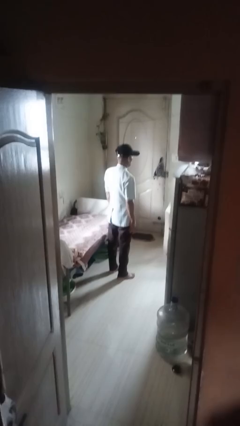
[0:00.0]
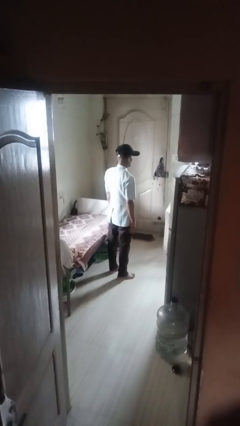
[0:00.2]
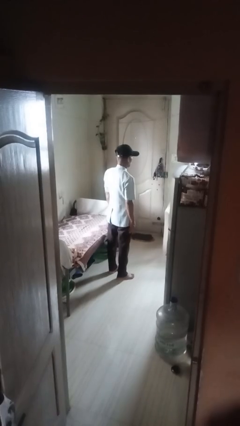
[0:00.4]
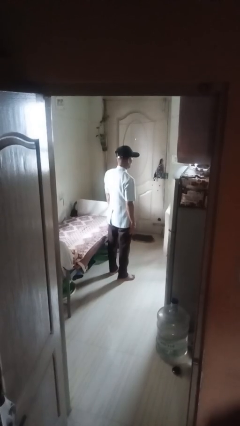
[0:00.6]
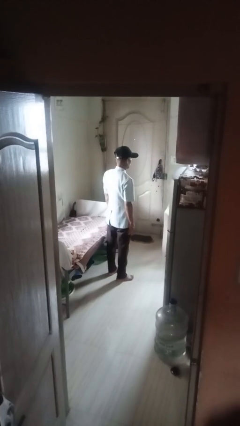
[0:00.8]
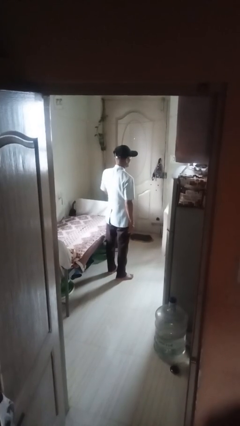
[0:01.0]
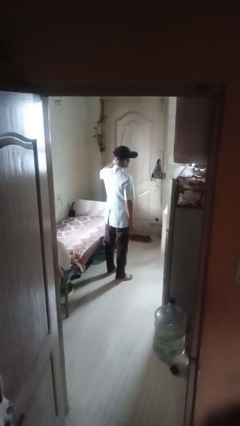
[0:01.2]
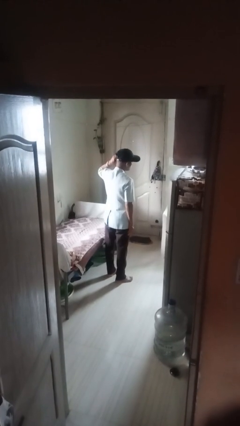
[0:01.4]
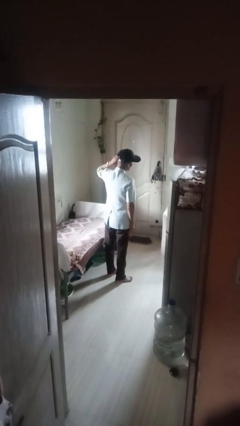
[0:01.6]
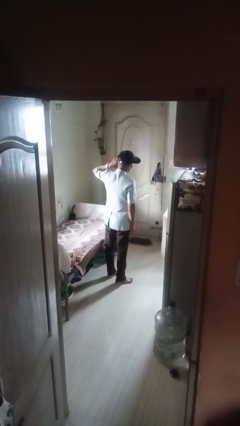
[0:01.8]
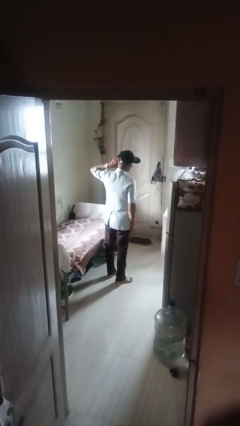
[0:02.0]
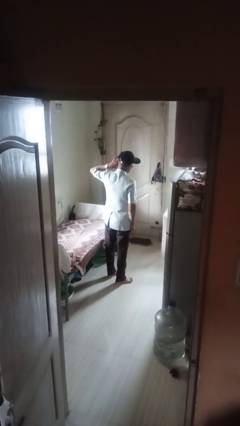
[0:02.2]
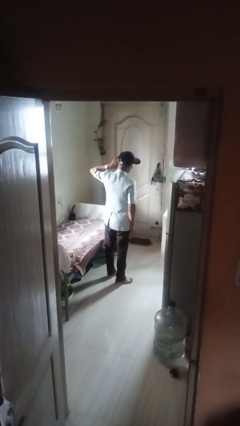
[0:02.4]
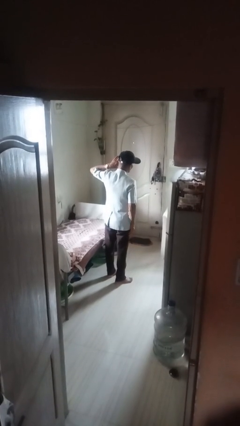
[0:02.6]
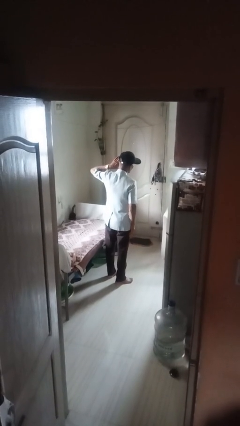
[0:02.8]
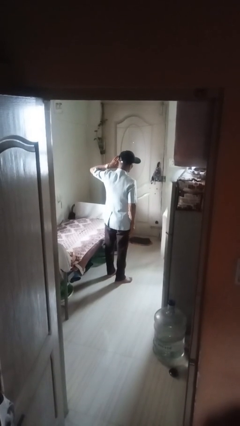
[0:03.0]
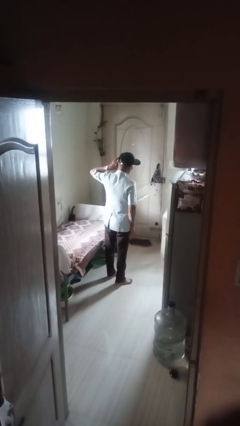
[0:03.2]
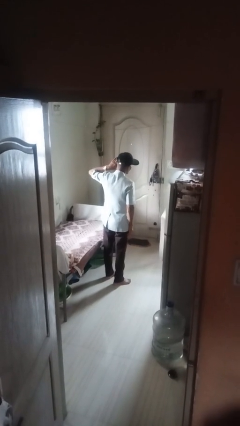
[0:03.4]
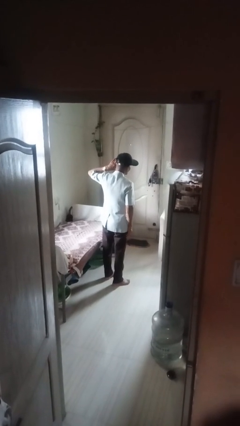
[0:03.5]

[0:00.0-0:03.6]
person gestures listen closely

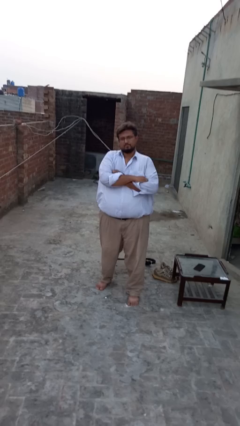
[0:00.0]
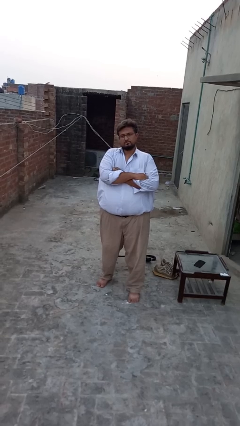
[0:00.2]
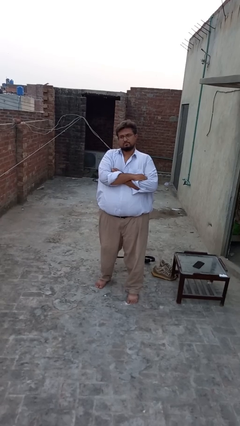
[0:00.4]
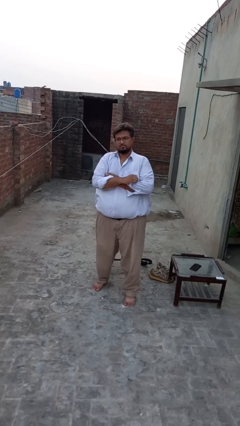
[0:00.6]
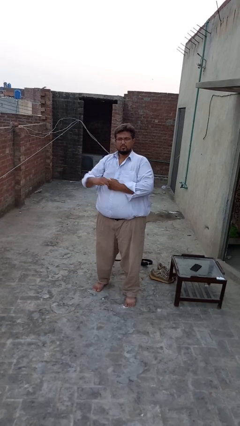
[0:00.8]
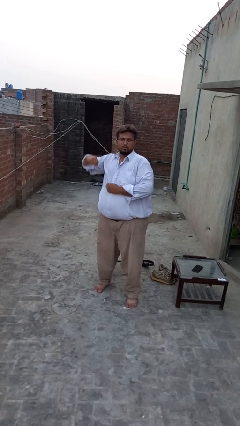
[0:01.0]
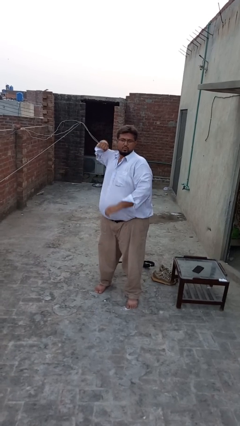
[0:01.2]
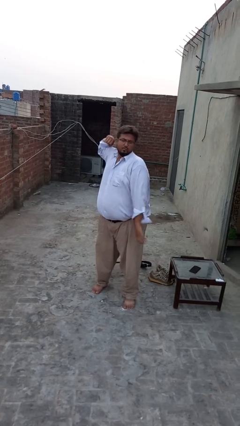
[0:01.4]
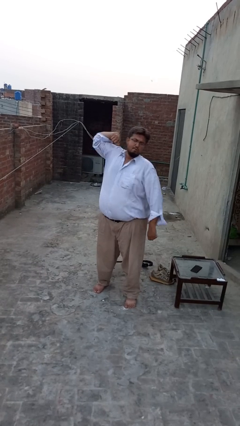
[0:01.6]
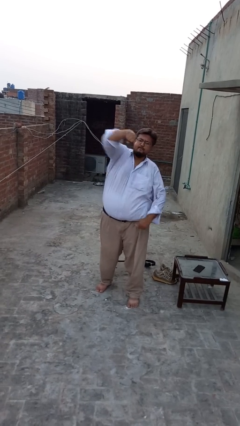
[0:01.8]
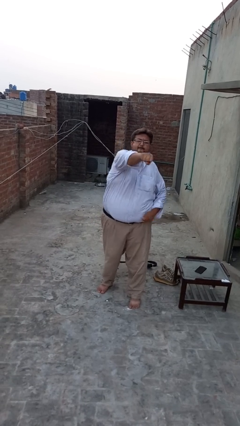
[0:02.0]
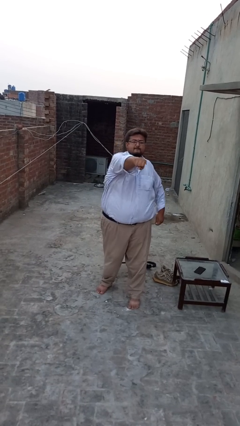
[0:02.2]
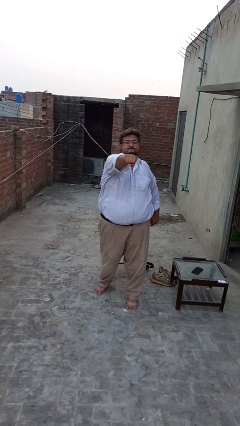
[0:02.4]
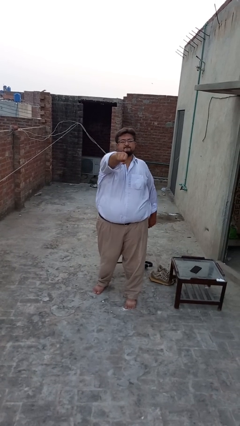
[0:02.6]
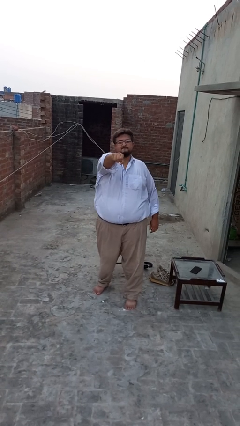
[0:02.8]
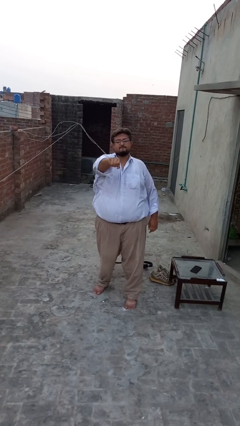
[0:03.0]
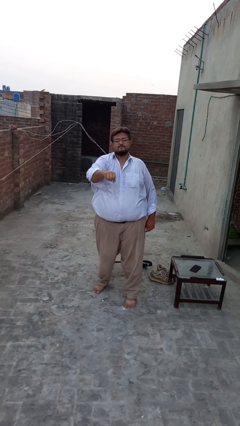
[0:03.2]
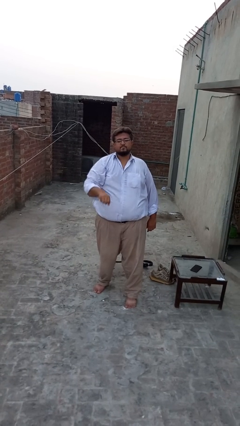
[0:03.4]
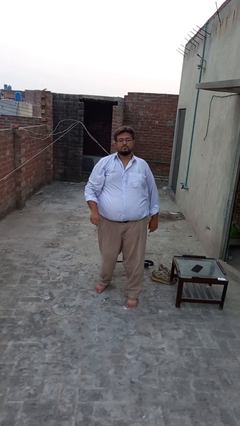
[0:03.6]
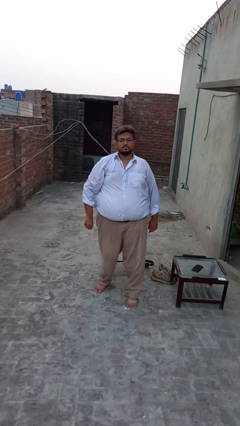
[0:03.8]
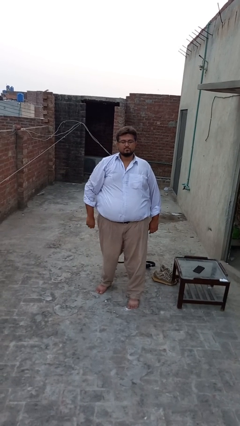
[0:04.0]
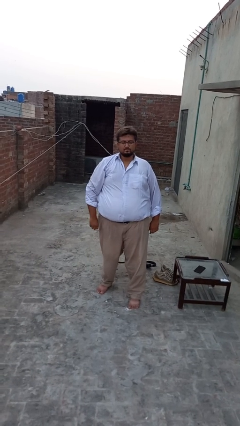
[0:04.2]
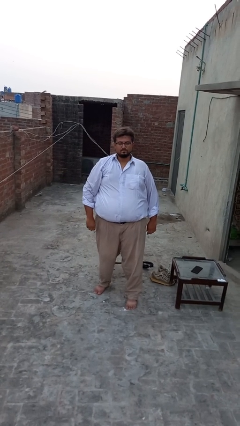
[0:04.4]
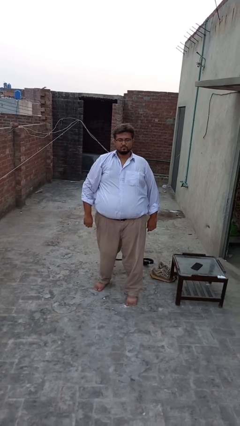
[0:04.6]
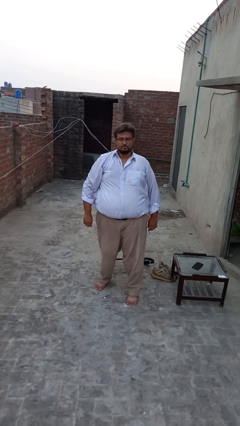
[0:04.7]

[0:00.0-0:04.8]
person punches

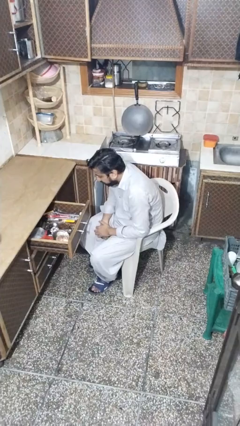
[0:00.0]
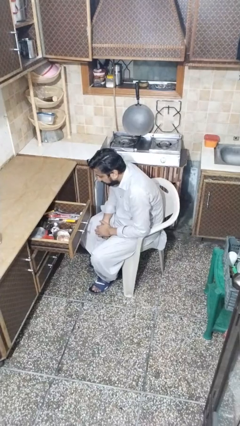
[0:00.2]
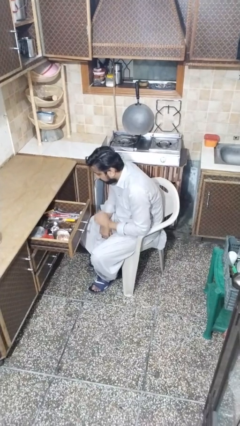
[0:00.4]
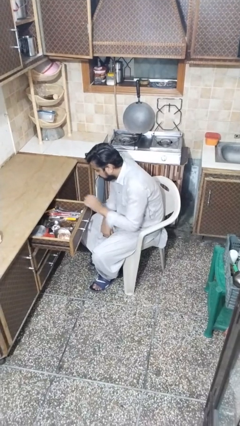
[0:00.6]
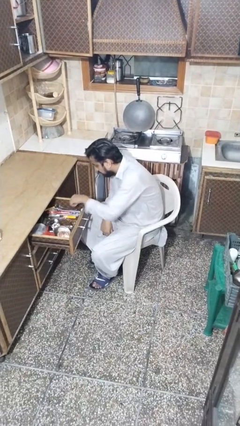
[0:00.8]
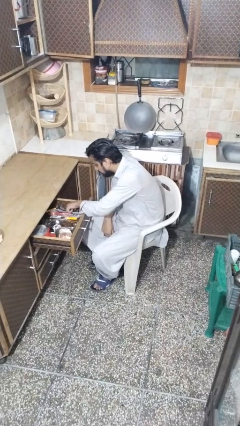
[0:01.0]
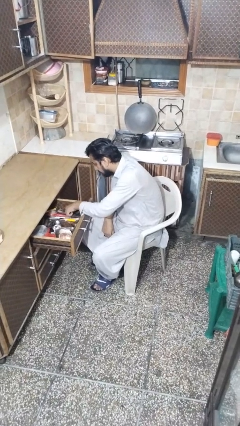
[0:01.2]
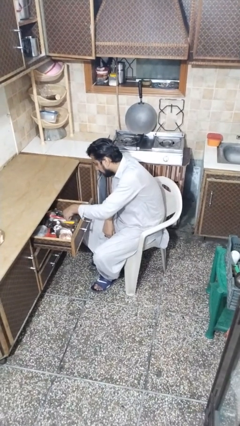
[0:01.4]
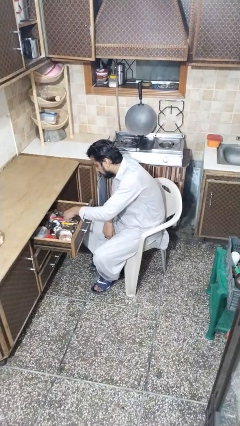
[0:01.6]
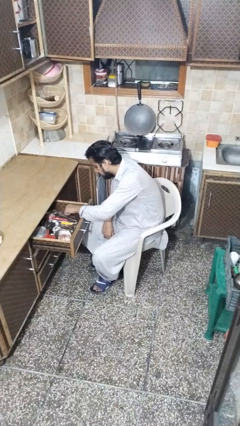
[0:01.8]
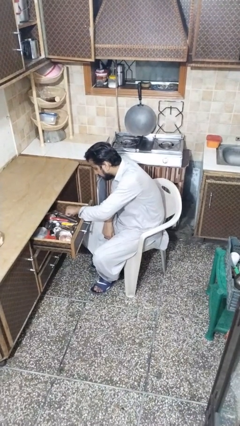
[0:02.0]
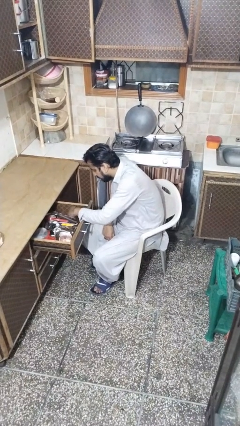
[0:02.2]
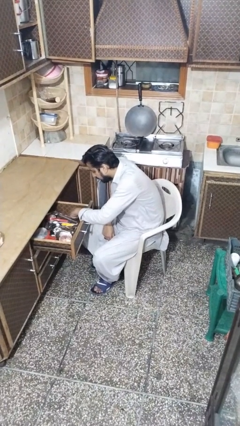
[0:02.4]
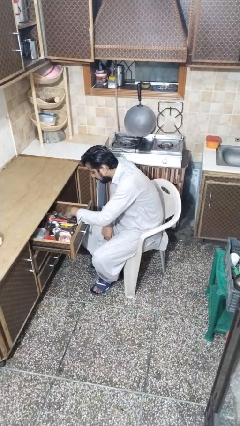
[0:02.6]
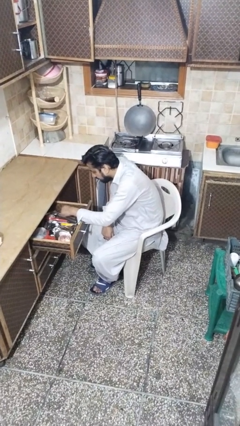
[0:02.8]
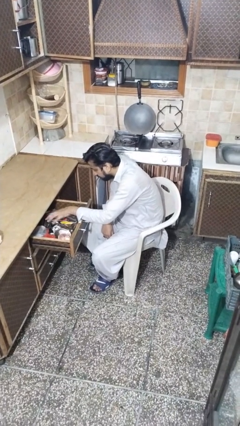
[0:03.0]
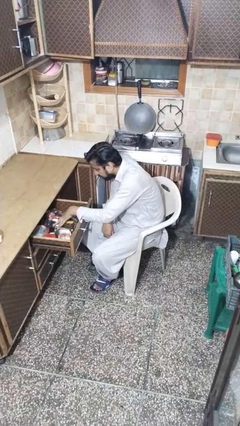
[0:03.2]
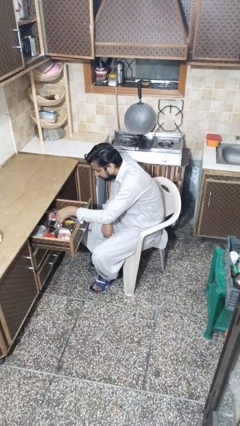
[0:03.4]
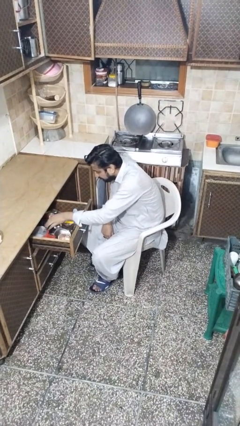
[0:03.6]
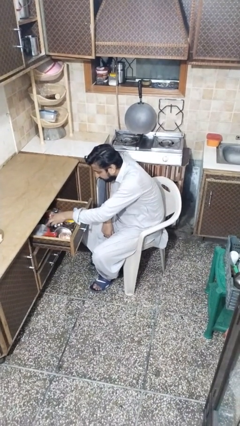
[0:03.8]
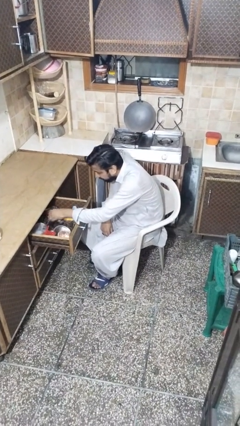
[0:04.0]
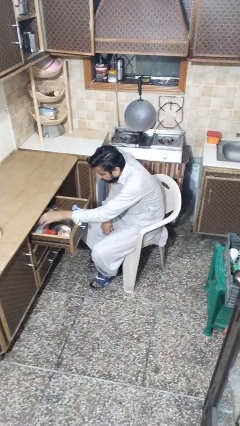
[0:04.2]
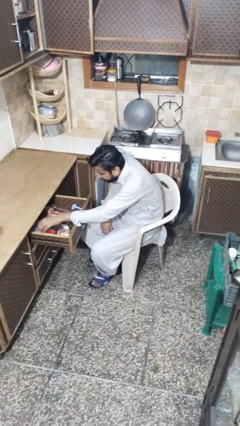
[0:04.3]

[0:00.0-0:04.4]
person searches in kitchen drawer

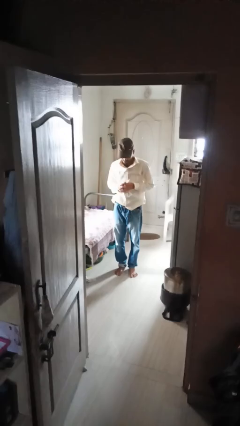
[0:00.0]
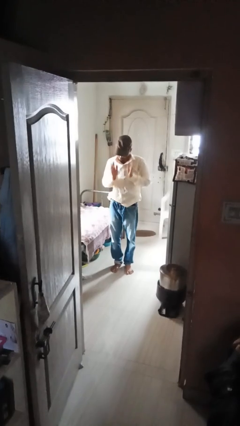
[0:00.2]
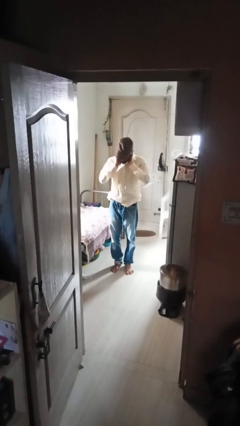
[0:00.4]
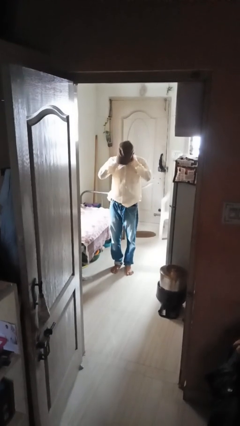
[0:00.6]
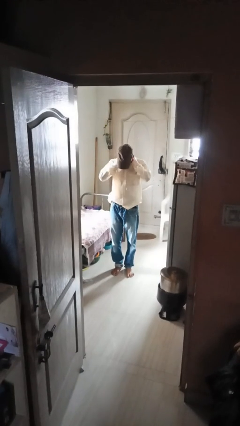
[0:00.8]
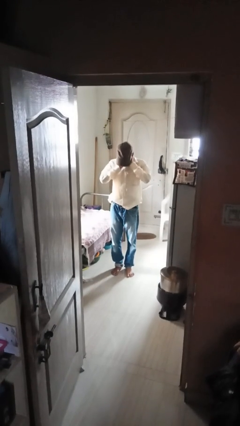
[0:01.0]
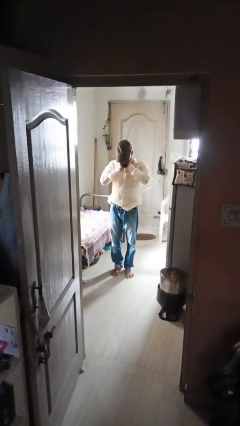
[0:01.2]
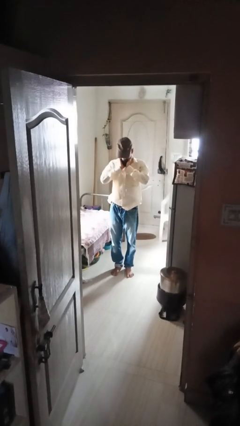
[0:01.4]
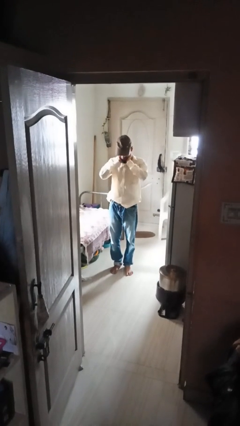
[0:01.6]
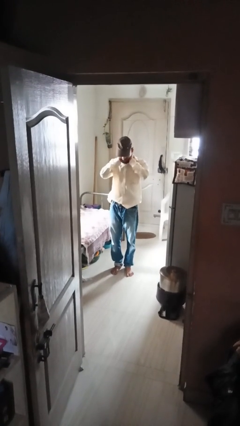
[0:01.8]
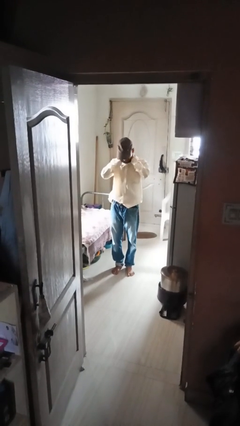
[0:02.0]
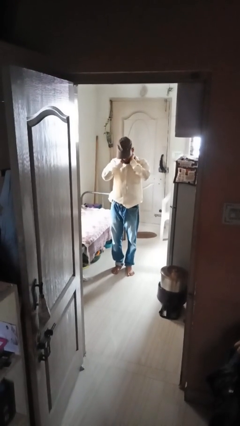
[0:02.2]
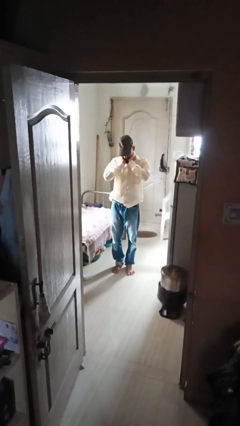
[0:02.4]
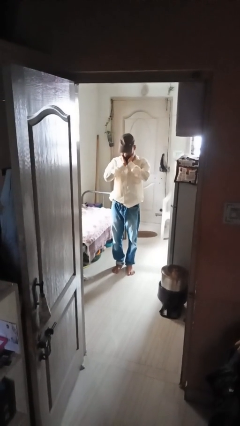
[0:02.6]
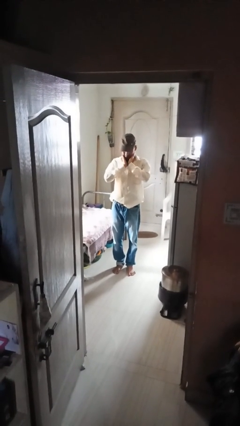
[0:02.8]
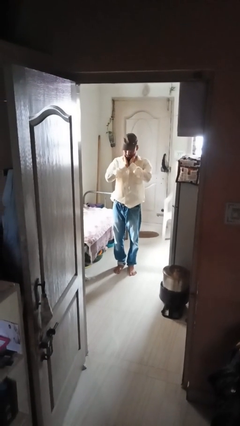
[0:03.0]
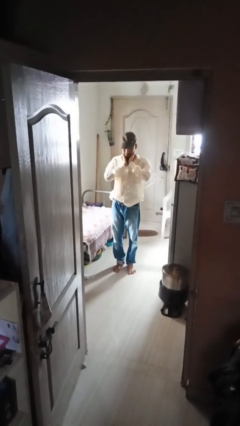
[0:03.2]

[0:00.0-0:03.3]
person rubs neck

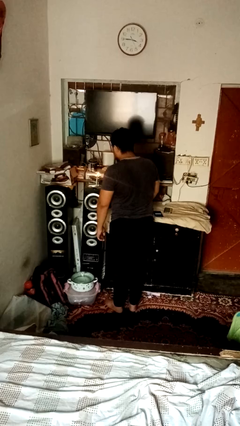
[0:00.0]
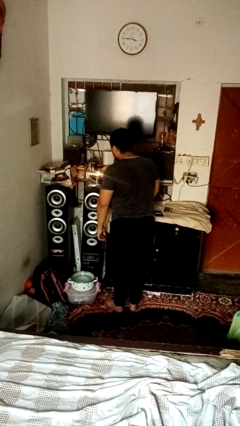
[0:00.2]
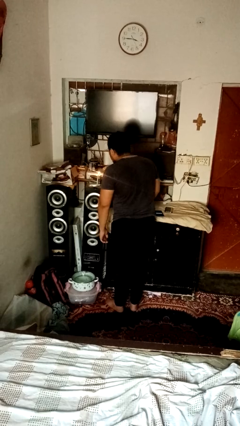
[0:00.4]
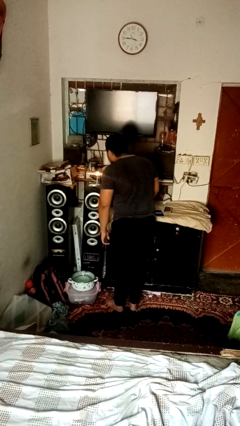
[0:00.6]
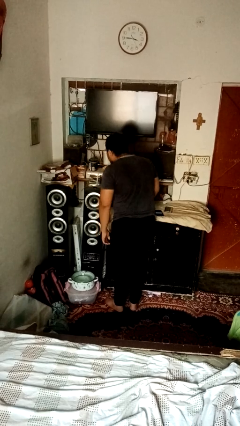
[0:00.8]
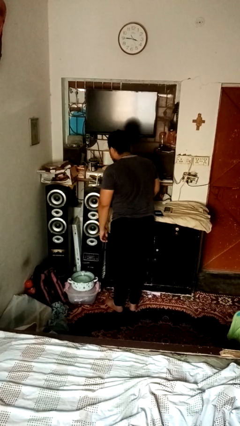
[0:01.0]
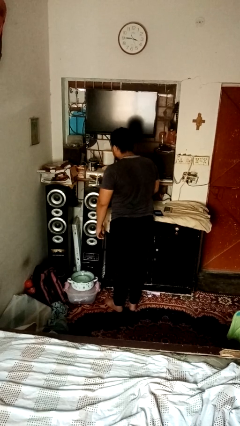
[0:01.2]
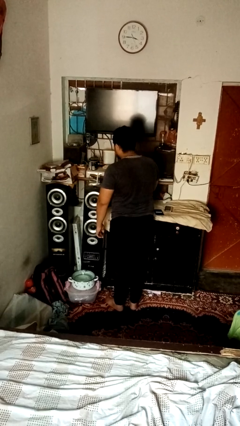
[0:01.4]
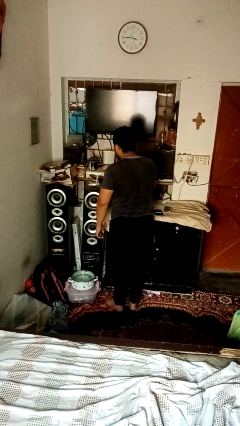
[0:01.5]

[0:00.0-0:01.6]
person extinguishes candle

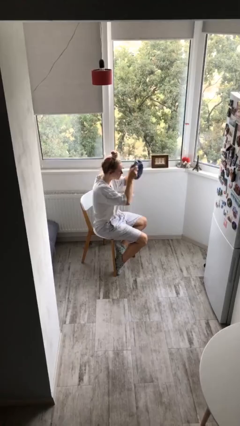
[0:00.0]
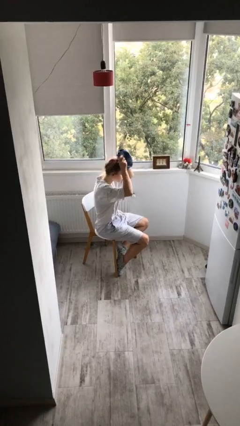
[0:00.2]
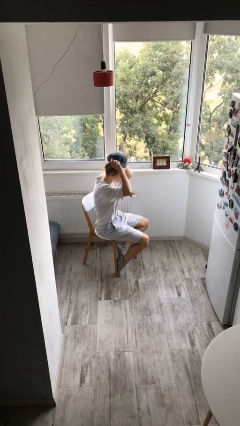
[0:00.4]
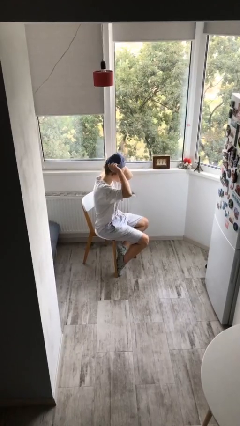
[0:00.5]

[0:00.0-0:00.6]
person puts on hat
